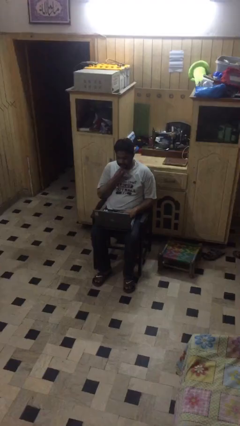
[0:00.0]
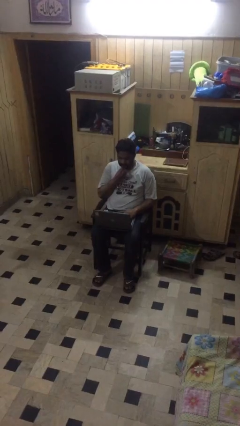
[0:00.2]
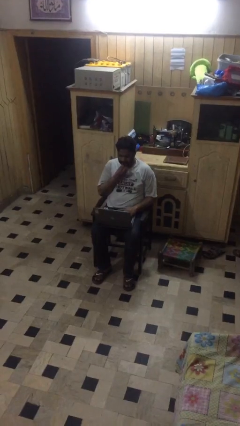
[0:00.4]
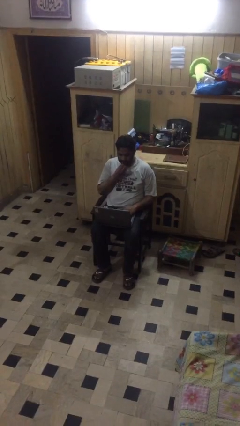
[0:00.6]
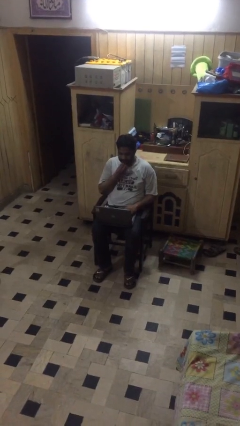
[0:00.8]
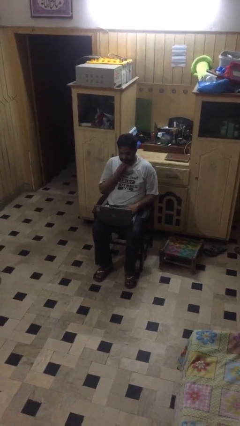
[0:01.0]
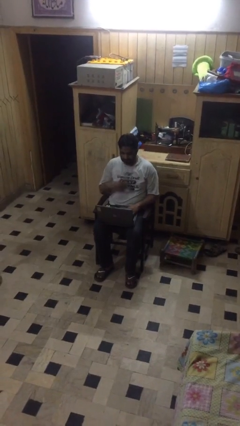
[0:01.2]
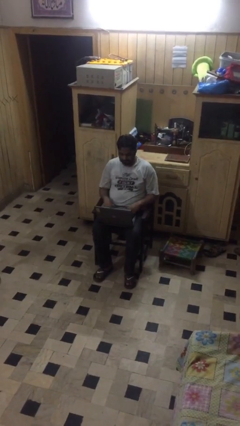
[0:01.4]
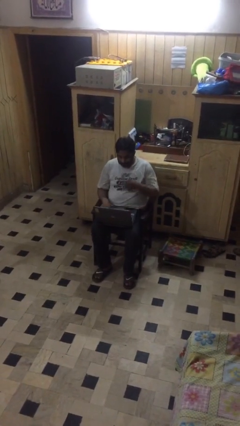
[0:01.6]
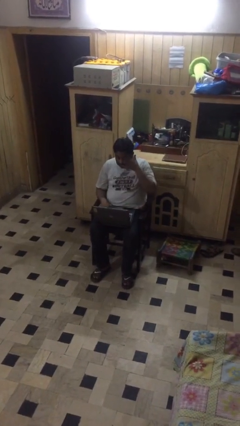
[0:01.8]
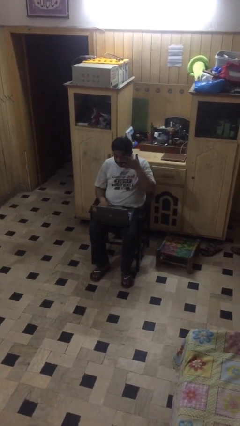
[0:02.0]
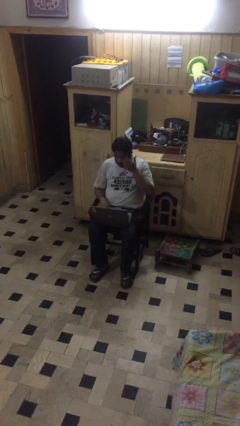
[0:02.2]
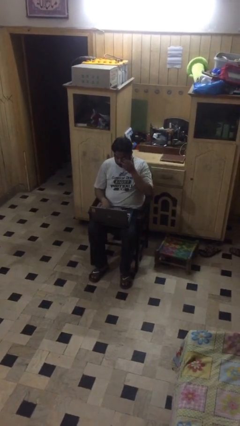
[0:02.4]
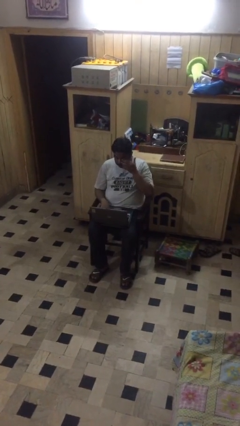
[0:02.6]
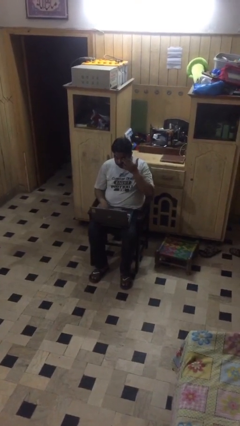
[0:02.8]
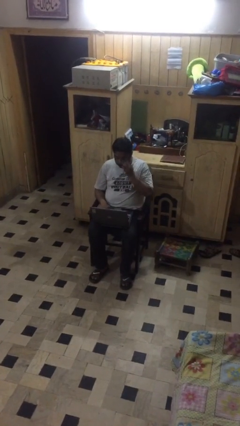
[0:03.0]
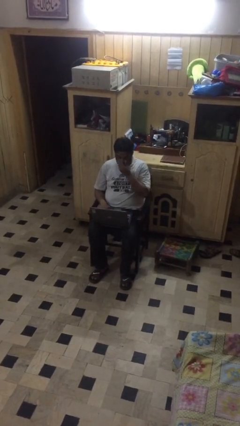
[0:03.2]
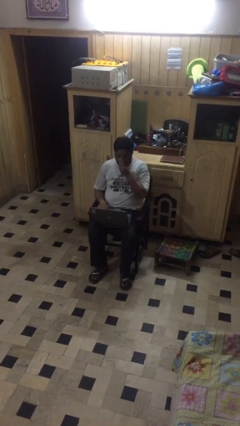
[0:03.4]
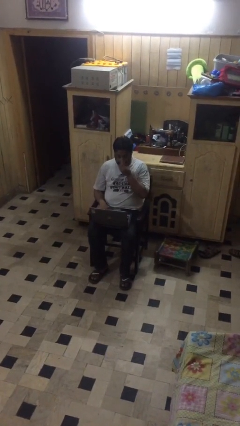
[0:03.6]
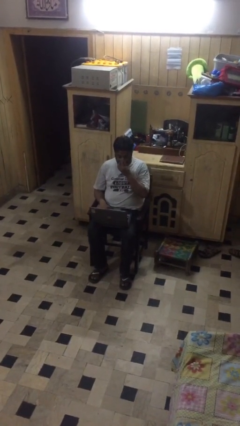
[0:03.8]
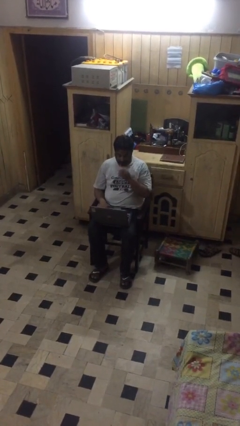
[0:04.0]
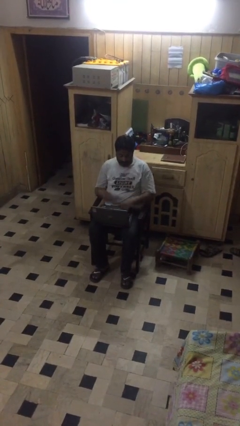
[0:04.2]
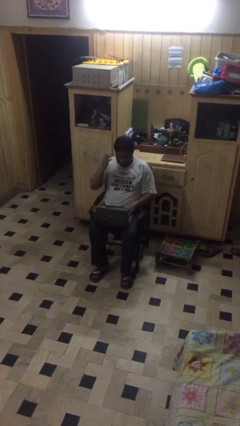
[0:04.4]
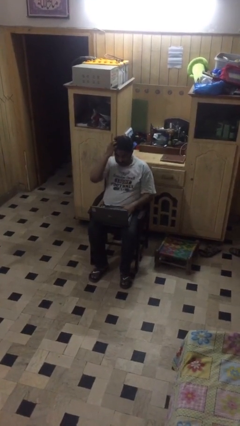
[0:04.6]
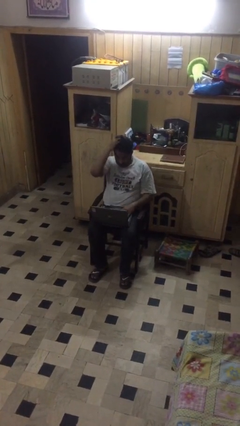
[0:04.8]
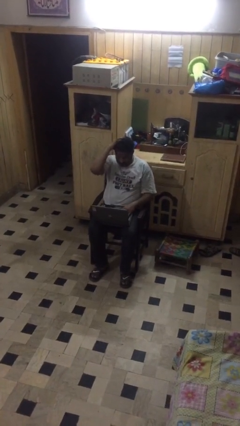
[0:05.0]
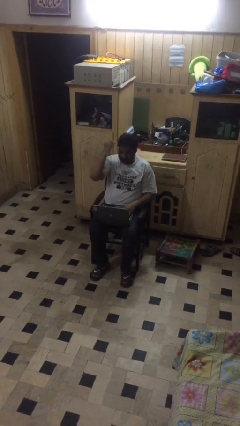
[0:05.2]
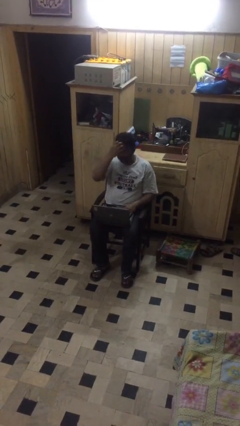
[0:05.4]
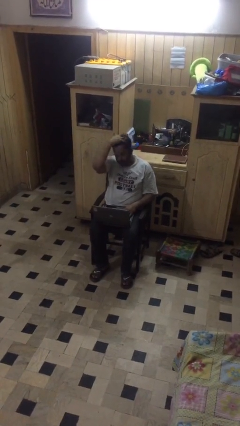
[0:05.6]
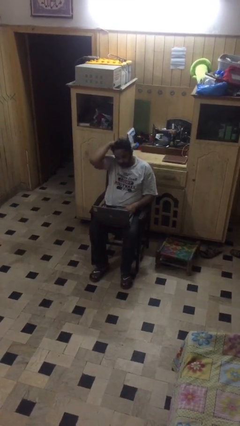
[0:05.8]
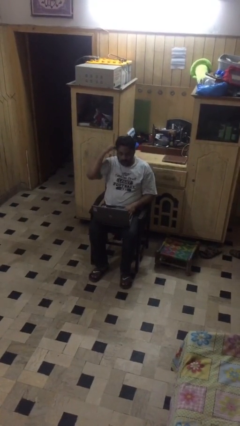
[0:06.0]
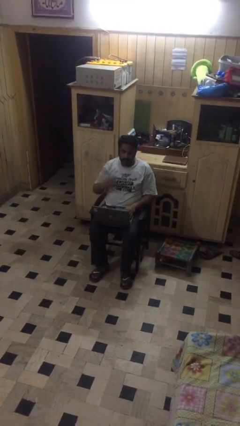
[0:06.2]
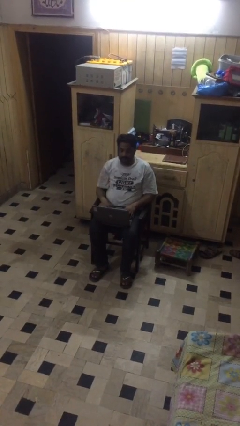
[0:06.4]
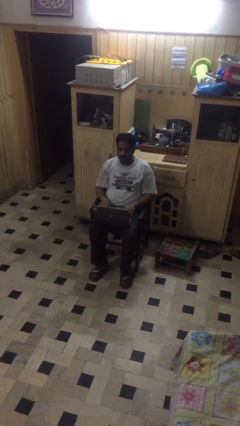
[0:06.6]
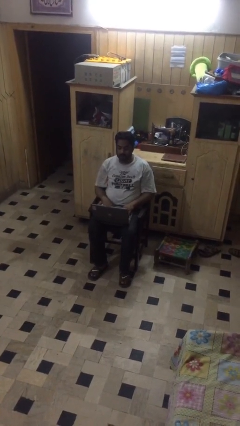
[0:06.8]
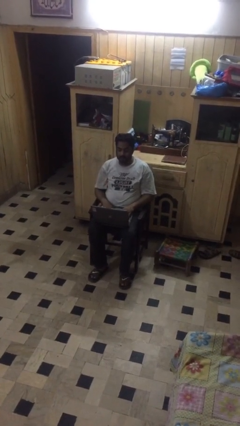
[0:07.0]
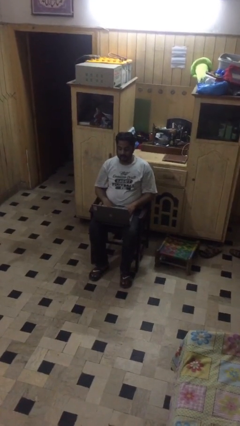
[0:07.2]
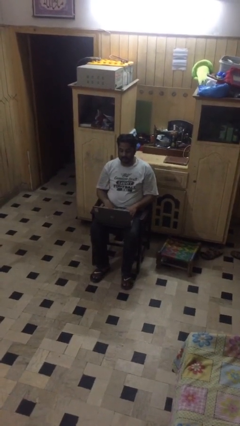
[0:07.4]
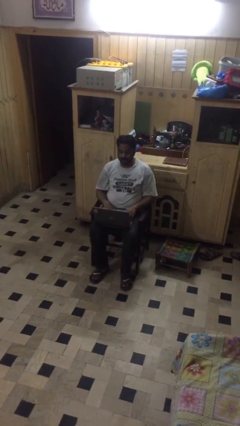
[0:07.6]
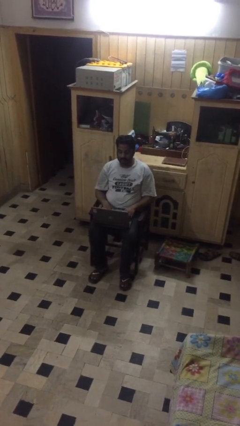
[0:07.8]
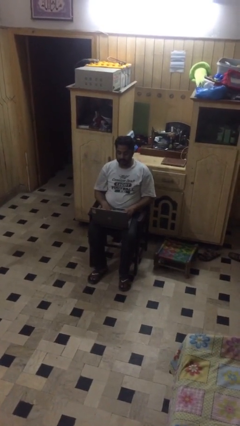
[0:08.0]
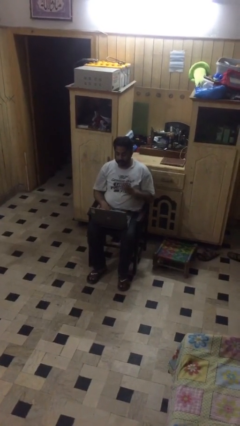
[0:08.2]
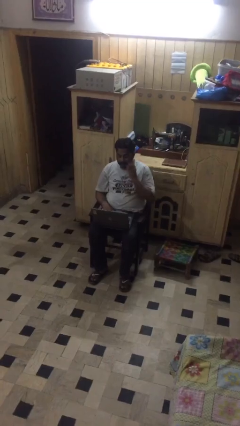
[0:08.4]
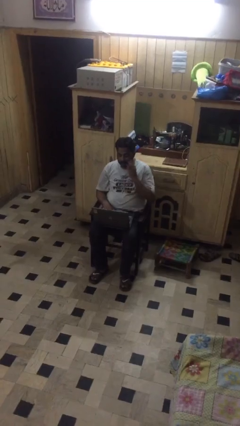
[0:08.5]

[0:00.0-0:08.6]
person interacts with laptop

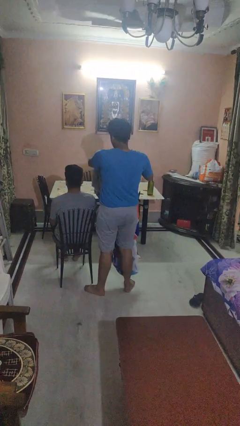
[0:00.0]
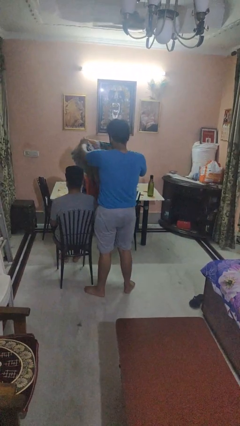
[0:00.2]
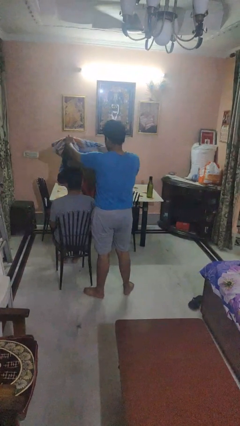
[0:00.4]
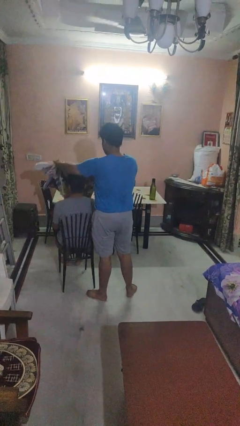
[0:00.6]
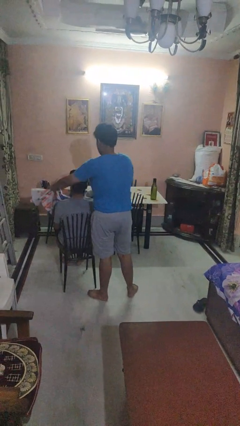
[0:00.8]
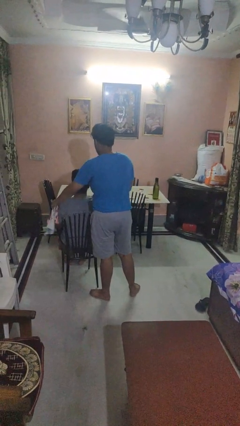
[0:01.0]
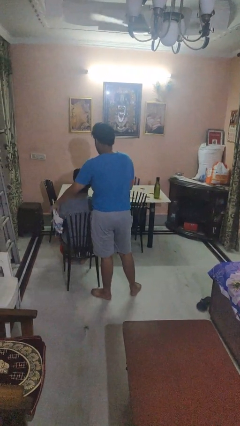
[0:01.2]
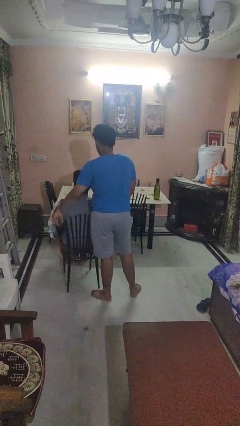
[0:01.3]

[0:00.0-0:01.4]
person covers friend with blanket

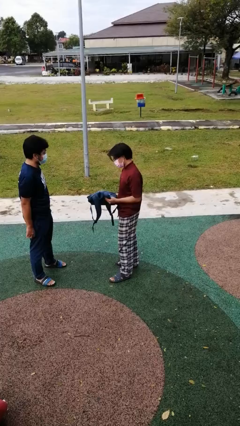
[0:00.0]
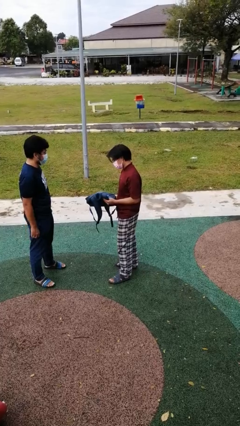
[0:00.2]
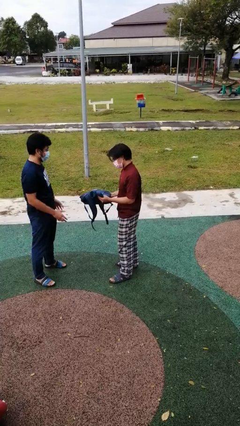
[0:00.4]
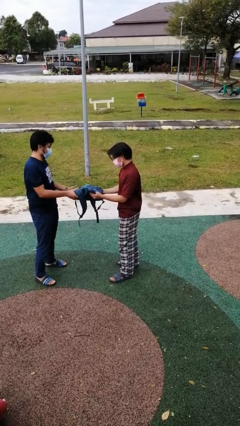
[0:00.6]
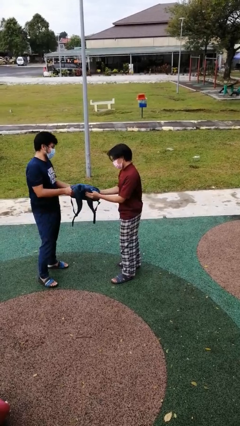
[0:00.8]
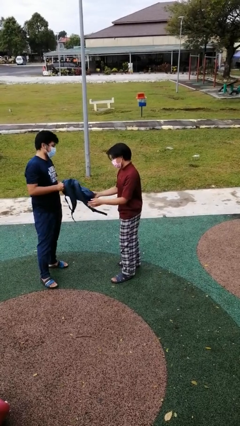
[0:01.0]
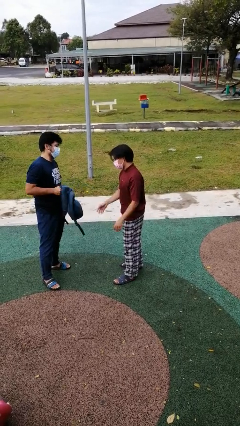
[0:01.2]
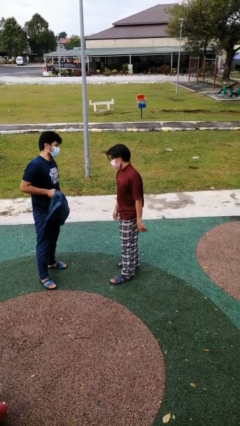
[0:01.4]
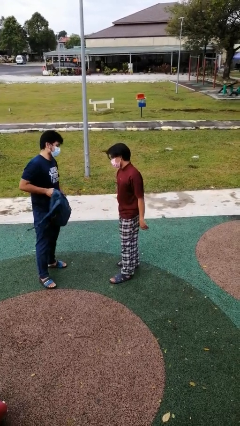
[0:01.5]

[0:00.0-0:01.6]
person transfers object to person

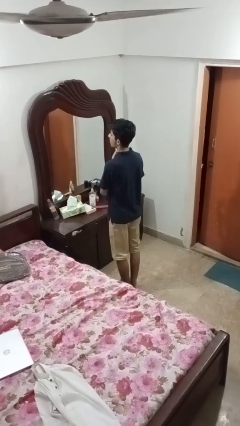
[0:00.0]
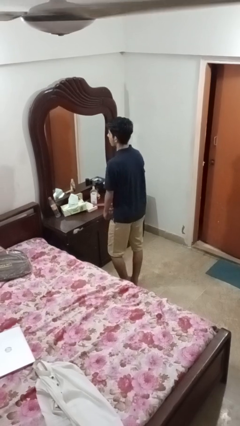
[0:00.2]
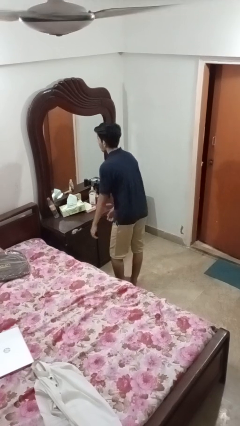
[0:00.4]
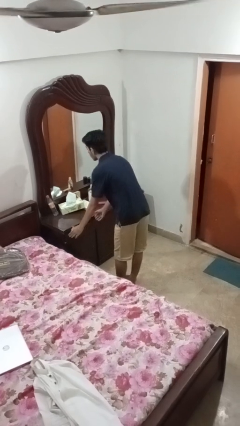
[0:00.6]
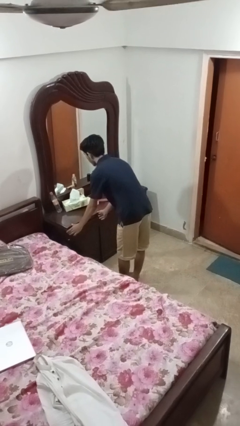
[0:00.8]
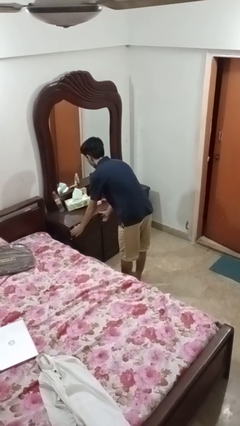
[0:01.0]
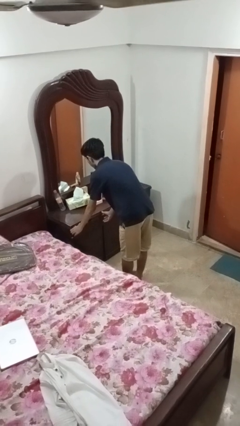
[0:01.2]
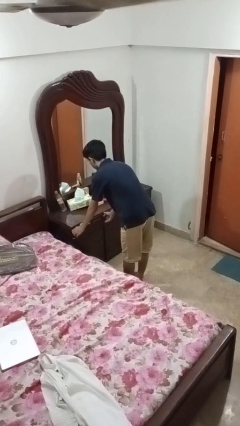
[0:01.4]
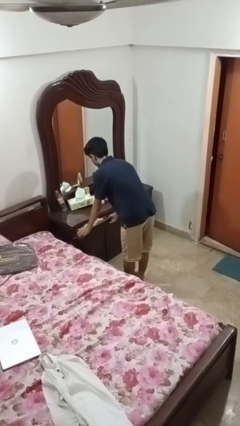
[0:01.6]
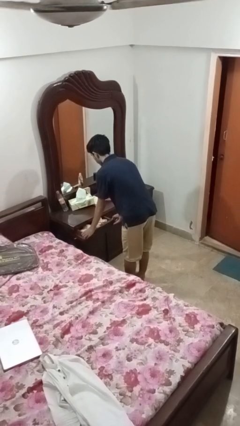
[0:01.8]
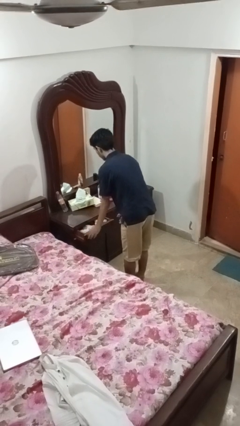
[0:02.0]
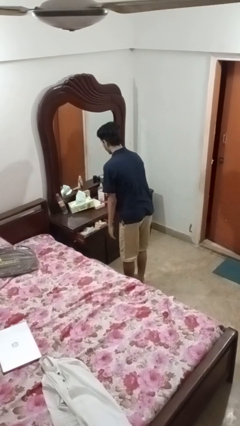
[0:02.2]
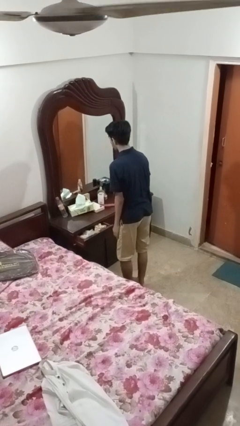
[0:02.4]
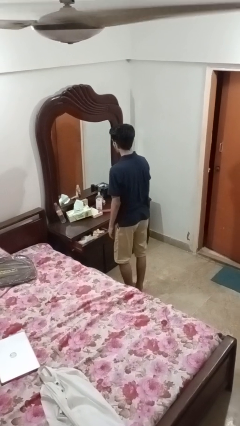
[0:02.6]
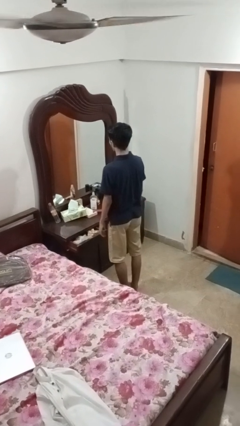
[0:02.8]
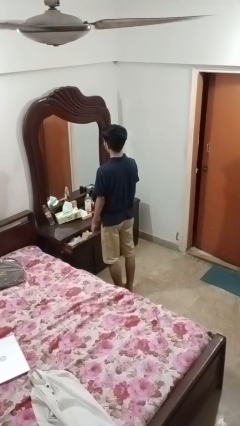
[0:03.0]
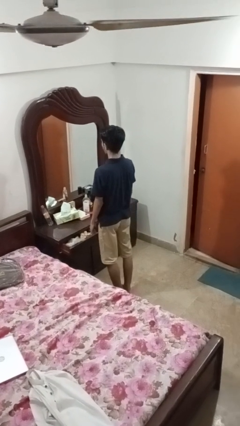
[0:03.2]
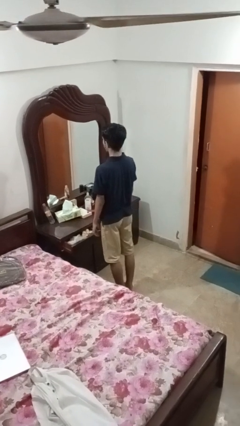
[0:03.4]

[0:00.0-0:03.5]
person opens dresser drawer

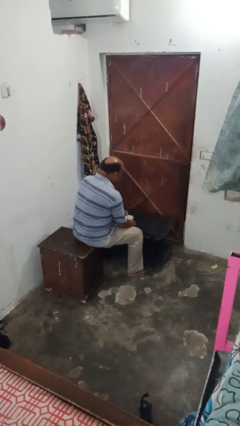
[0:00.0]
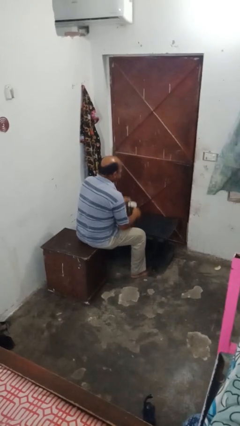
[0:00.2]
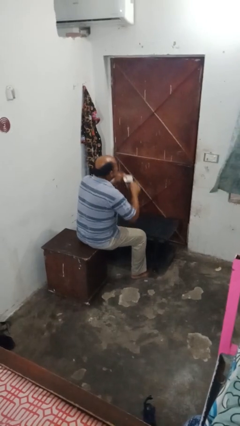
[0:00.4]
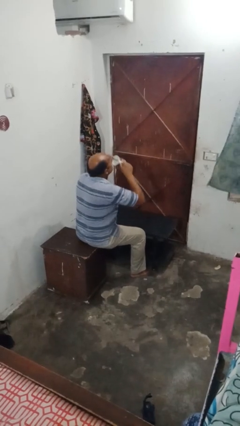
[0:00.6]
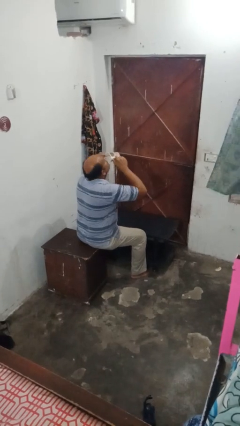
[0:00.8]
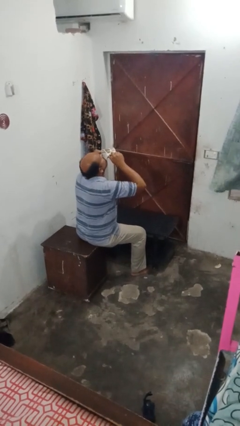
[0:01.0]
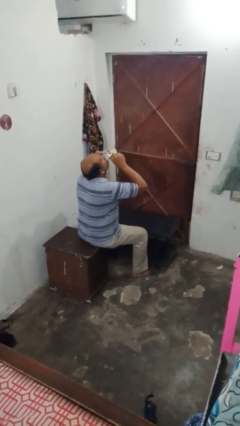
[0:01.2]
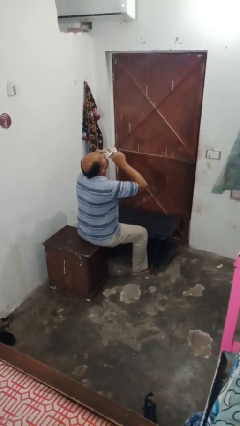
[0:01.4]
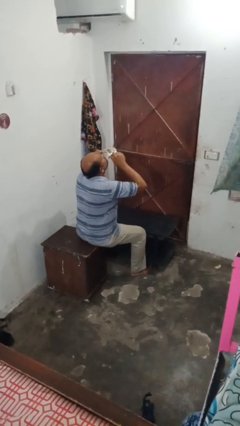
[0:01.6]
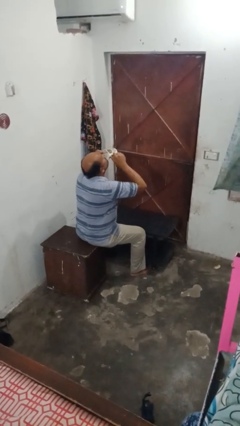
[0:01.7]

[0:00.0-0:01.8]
person drinks from mug

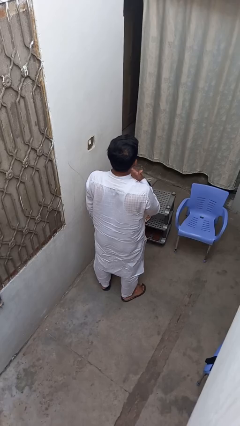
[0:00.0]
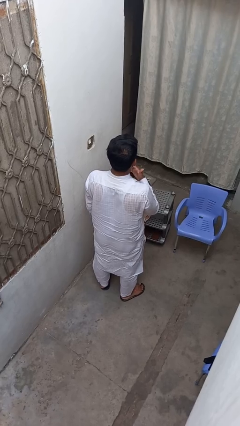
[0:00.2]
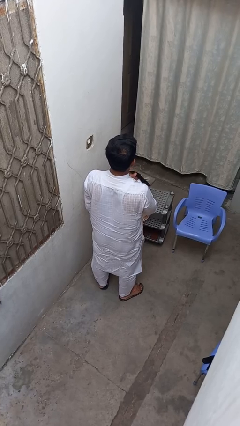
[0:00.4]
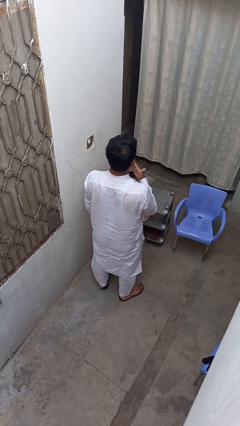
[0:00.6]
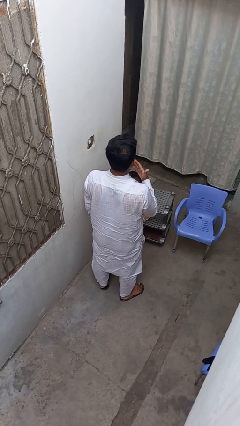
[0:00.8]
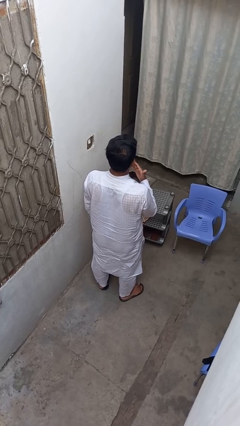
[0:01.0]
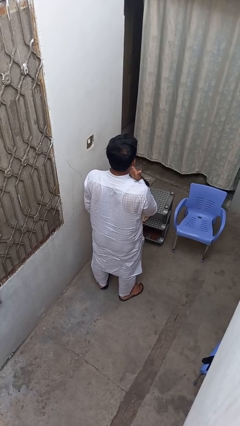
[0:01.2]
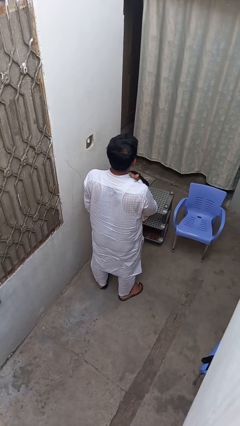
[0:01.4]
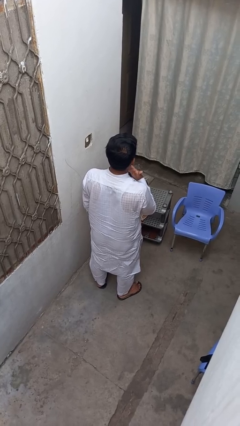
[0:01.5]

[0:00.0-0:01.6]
person drums on chest
